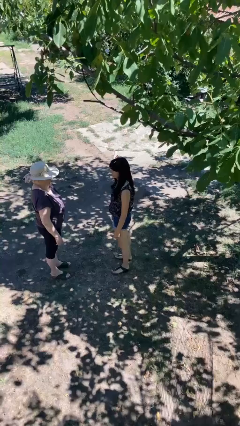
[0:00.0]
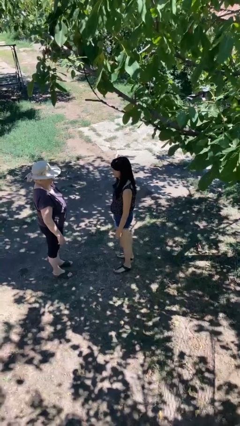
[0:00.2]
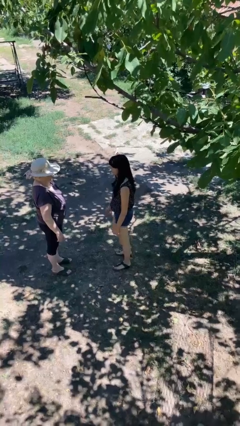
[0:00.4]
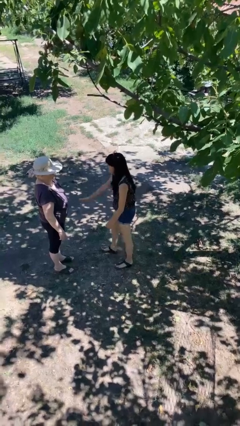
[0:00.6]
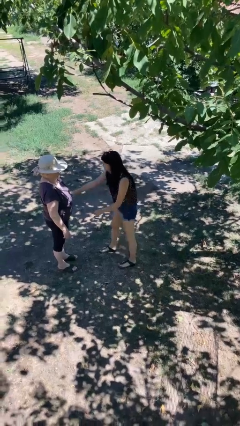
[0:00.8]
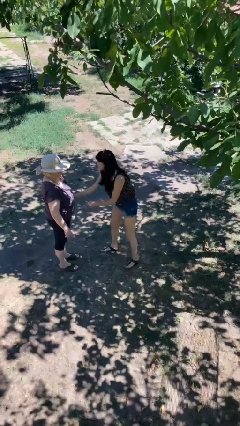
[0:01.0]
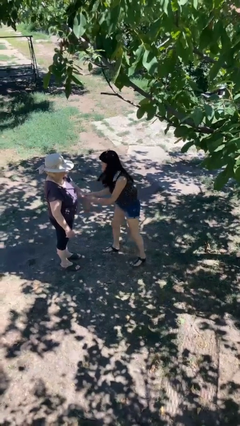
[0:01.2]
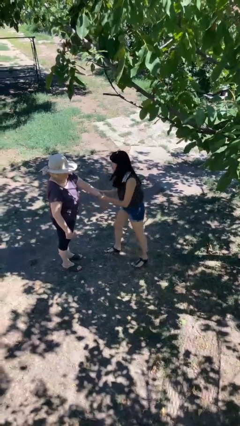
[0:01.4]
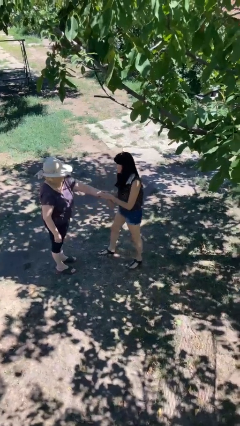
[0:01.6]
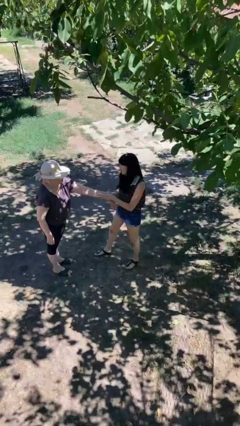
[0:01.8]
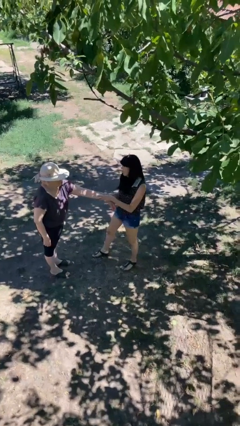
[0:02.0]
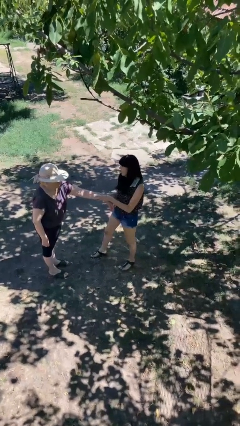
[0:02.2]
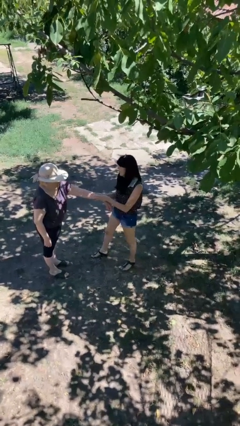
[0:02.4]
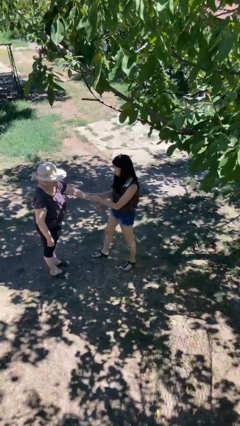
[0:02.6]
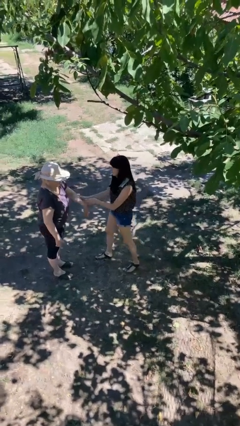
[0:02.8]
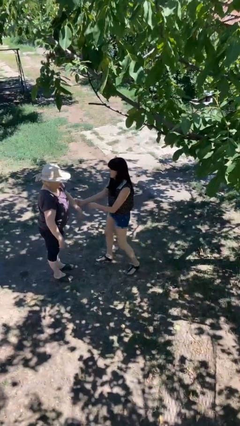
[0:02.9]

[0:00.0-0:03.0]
person grabs person by forearm

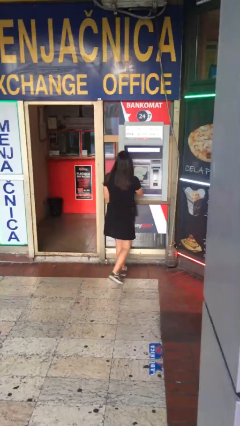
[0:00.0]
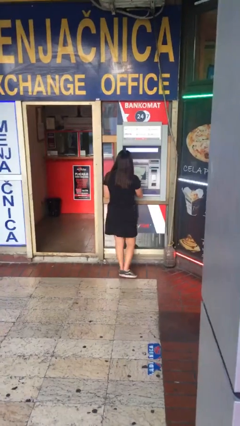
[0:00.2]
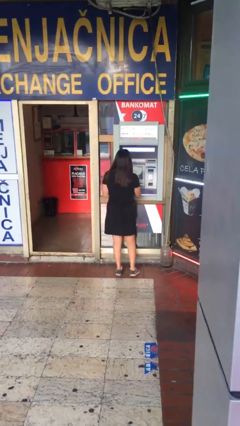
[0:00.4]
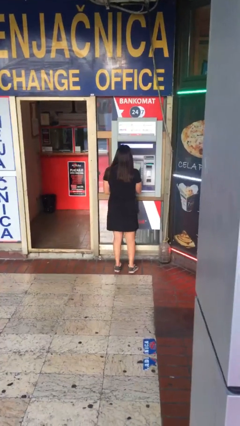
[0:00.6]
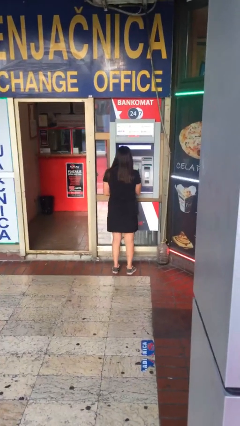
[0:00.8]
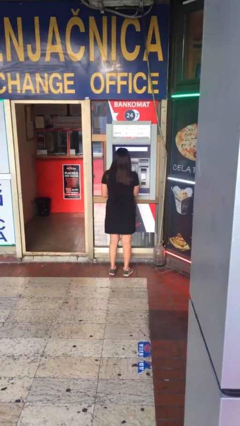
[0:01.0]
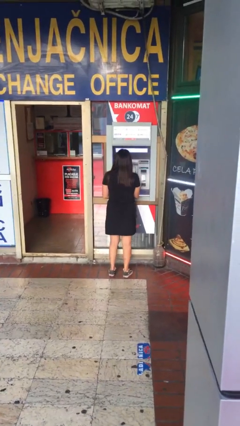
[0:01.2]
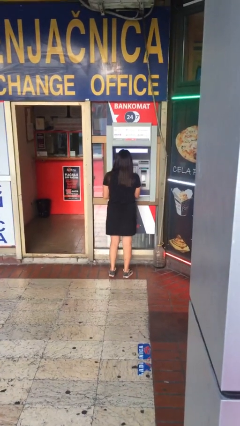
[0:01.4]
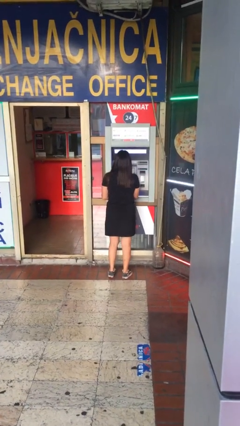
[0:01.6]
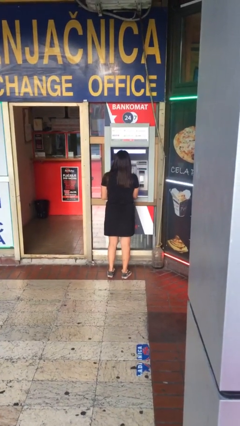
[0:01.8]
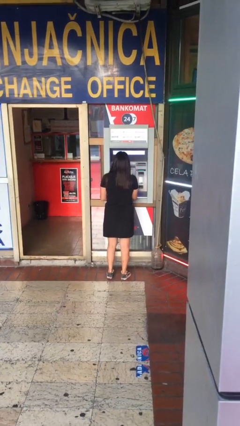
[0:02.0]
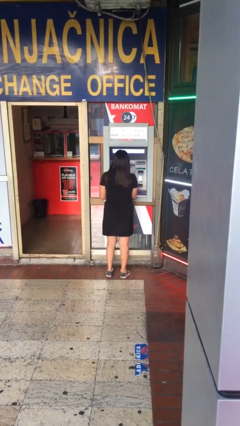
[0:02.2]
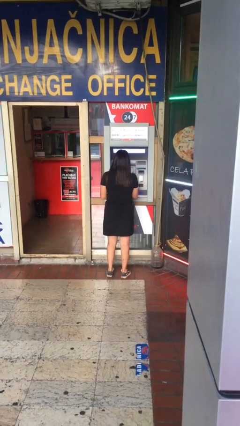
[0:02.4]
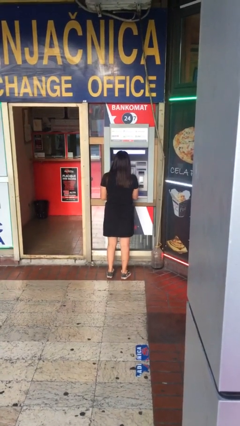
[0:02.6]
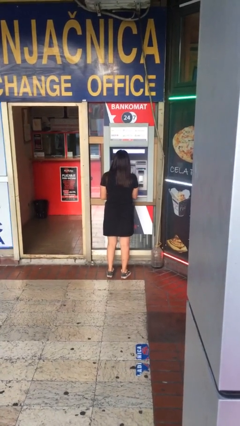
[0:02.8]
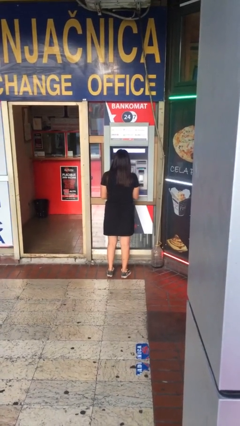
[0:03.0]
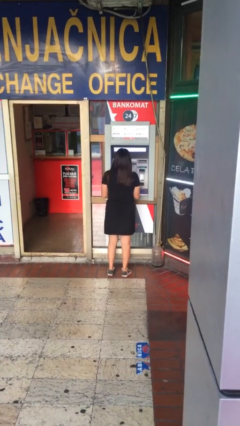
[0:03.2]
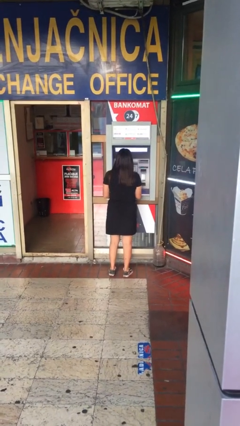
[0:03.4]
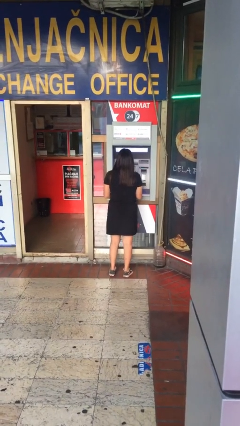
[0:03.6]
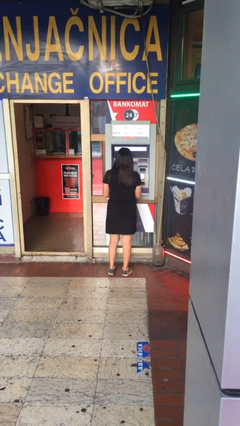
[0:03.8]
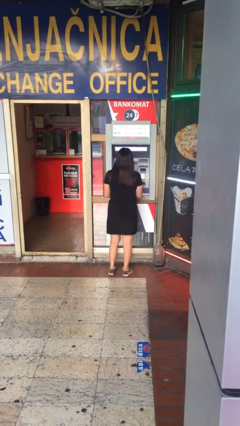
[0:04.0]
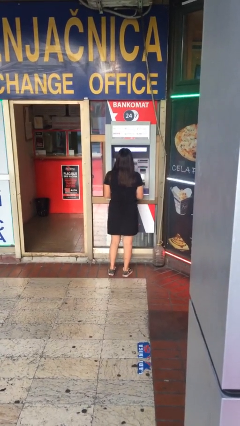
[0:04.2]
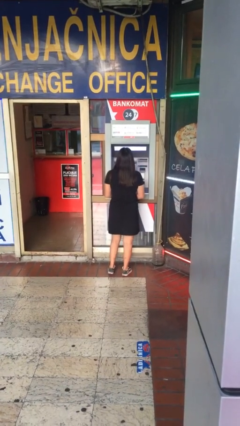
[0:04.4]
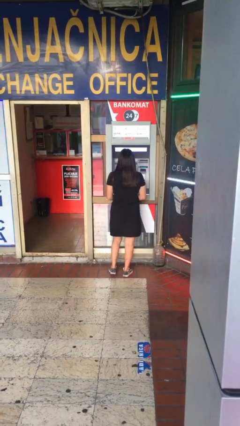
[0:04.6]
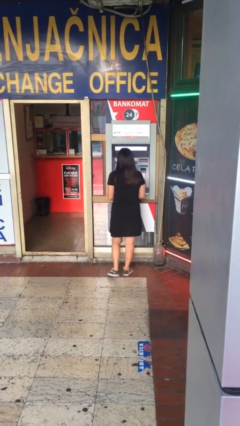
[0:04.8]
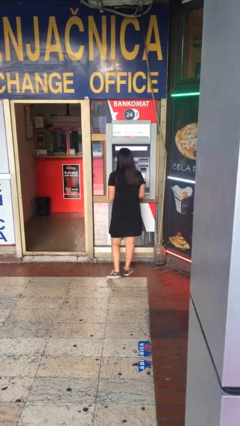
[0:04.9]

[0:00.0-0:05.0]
person purchases from machine

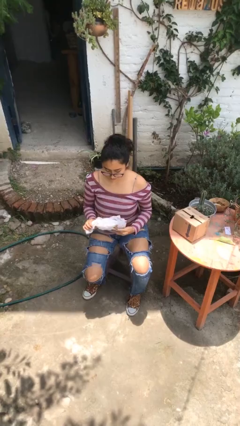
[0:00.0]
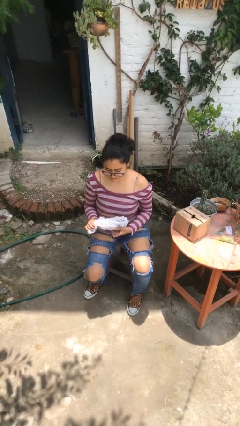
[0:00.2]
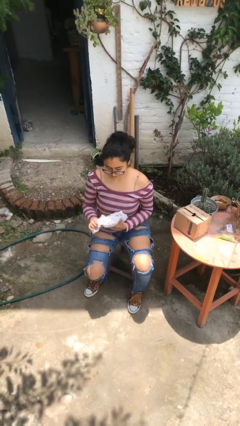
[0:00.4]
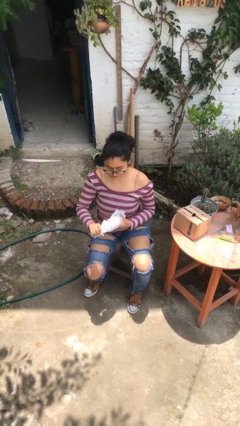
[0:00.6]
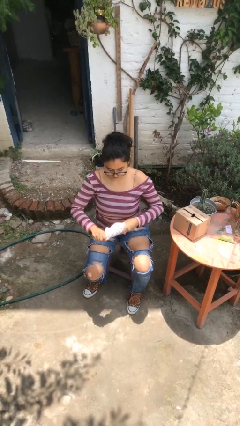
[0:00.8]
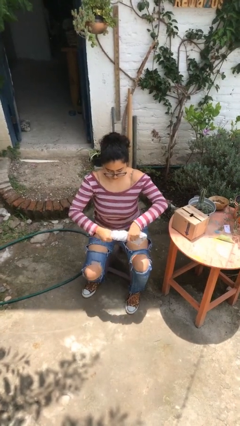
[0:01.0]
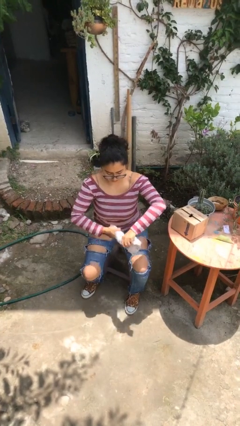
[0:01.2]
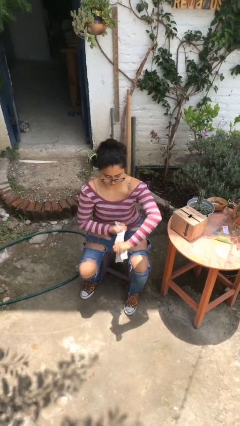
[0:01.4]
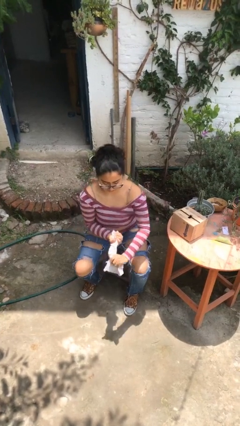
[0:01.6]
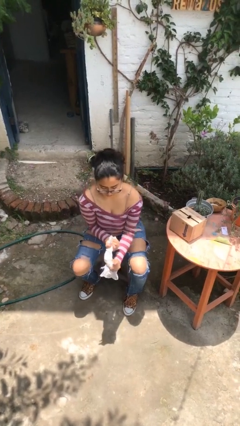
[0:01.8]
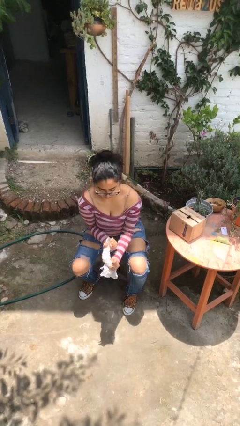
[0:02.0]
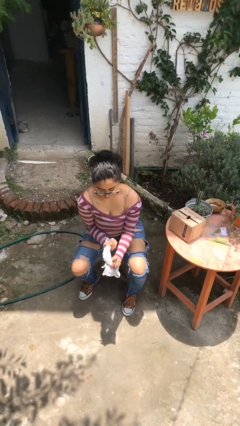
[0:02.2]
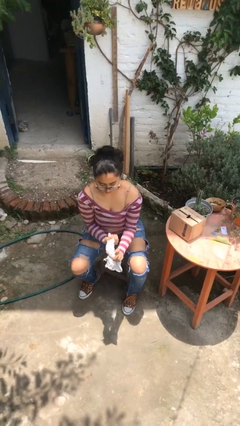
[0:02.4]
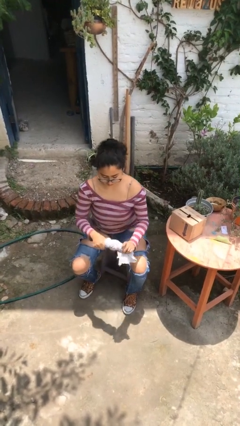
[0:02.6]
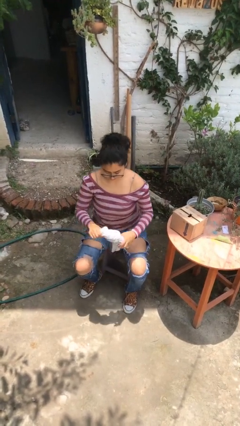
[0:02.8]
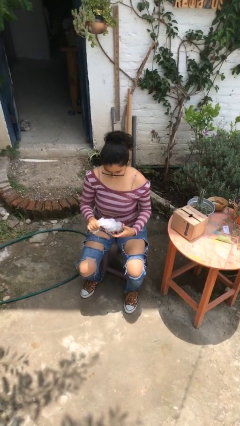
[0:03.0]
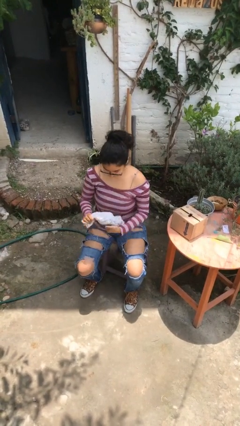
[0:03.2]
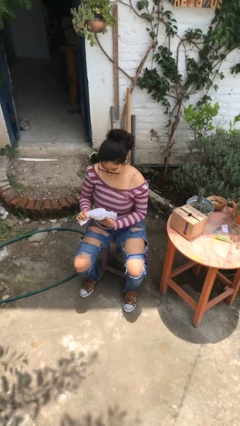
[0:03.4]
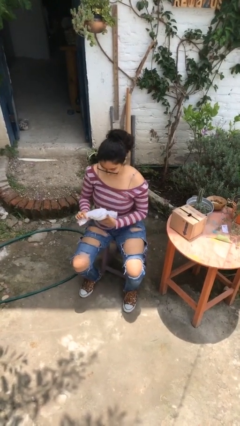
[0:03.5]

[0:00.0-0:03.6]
person squeezes object

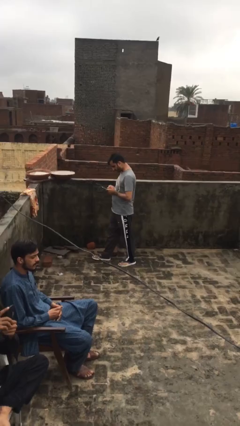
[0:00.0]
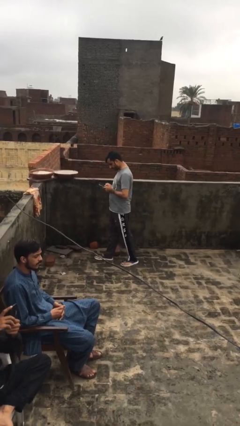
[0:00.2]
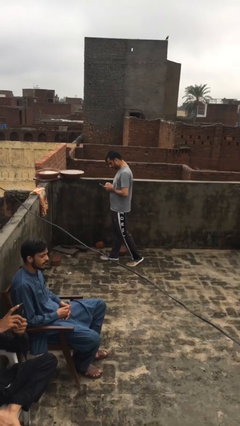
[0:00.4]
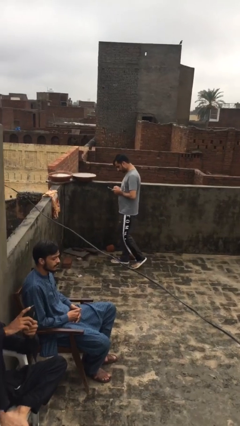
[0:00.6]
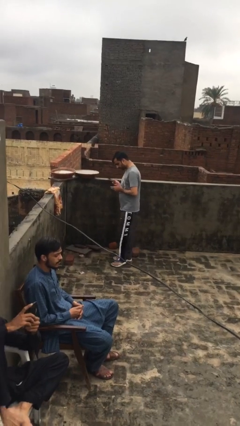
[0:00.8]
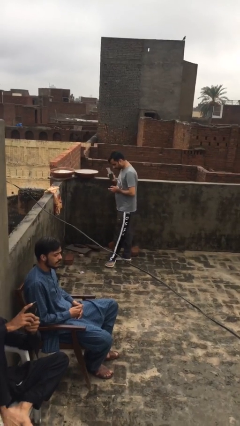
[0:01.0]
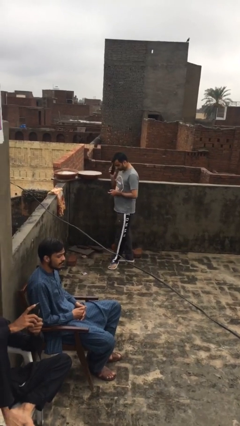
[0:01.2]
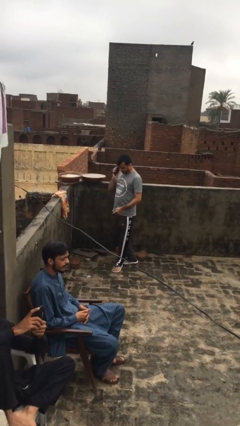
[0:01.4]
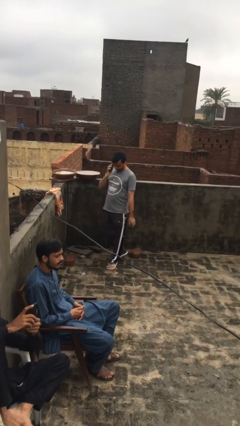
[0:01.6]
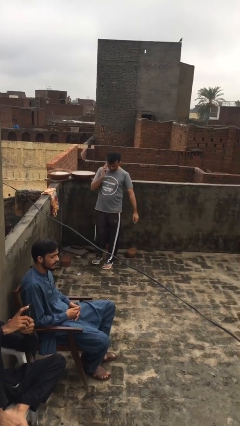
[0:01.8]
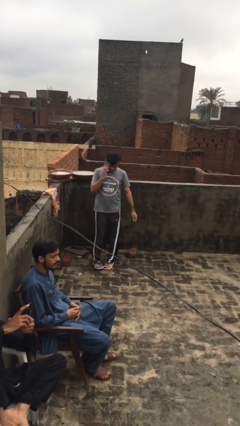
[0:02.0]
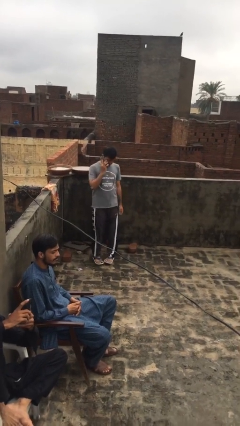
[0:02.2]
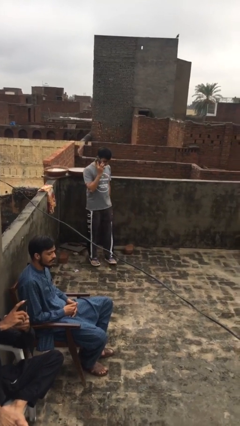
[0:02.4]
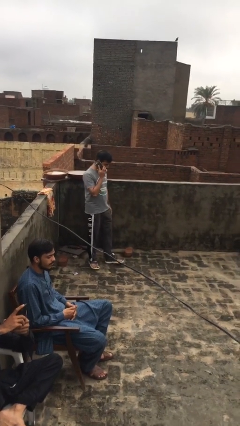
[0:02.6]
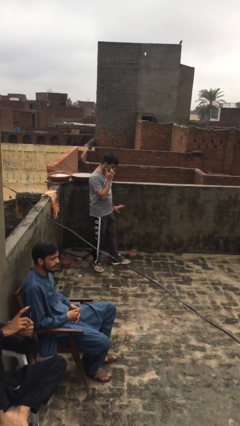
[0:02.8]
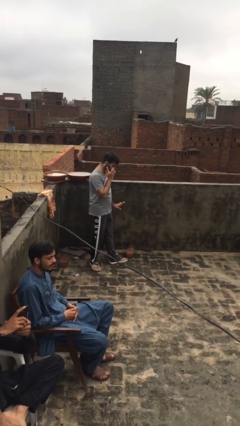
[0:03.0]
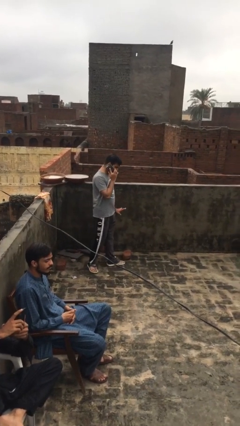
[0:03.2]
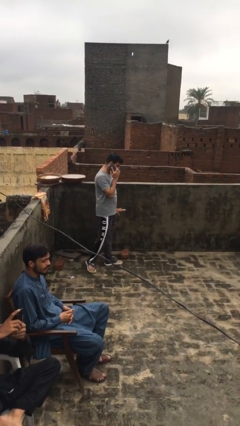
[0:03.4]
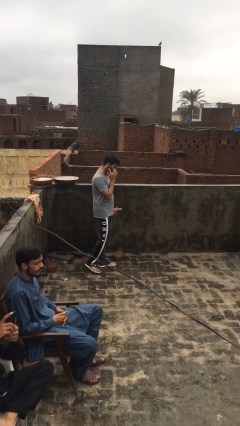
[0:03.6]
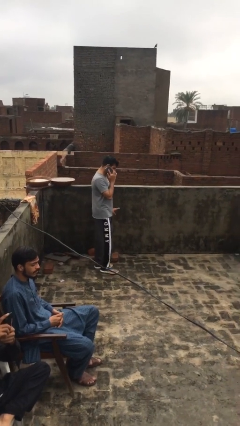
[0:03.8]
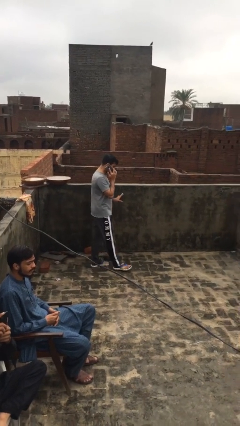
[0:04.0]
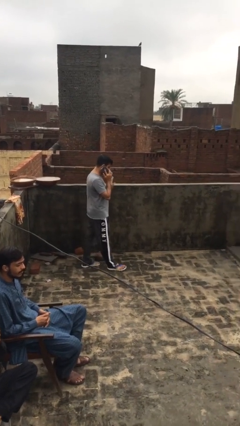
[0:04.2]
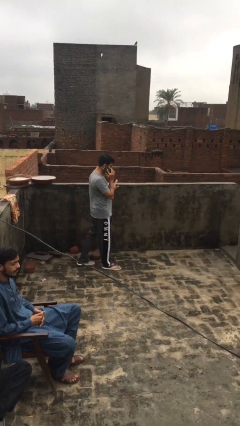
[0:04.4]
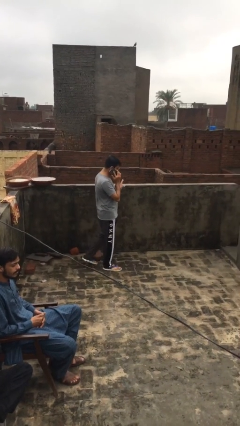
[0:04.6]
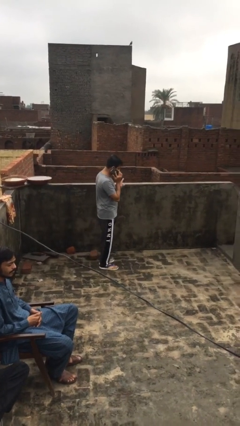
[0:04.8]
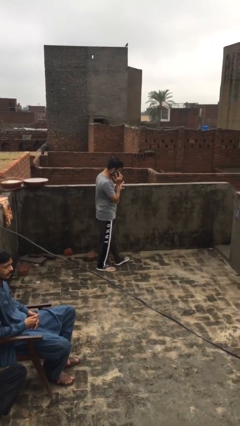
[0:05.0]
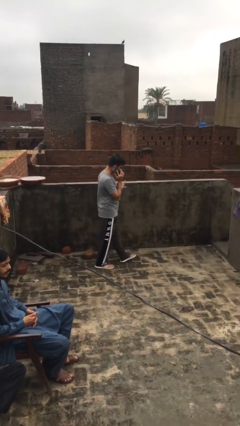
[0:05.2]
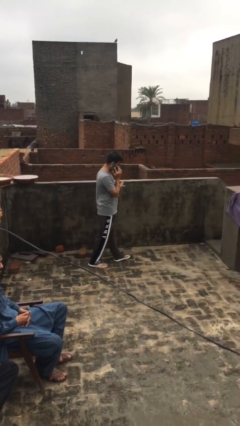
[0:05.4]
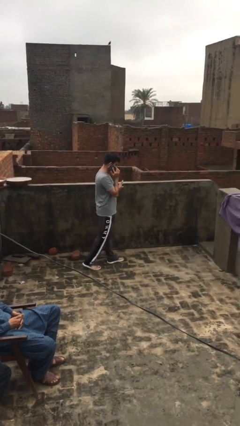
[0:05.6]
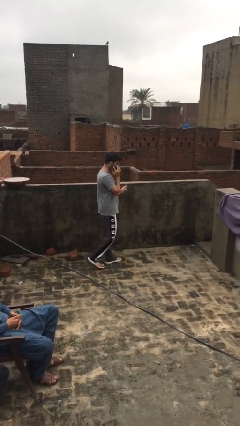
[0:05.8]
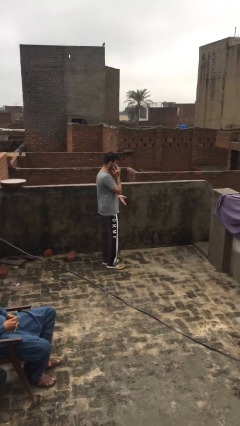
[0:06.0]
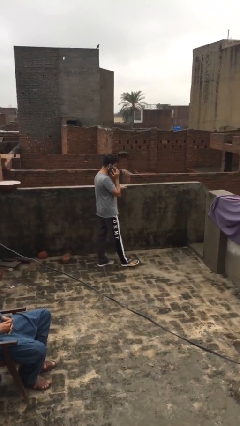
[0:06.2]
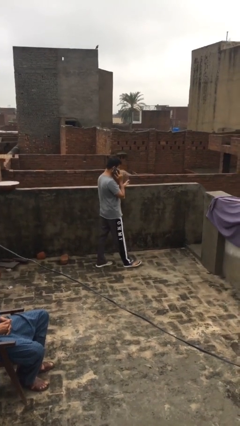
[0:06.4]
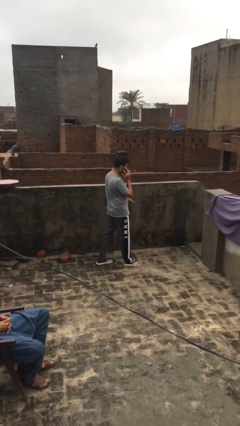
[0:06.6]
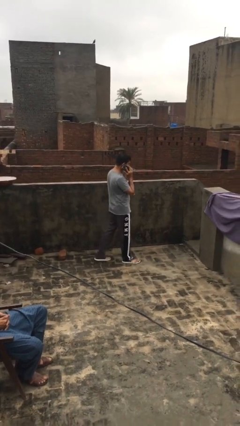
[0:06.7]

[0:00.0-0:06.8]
person talks on phone
